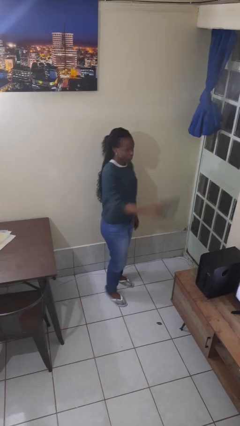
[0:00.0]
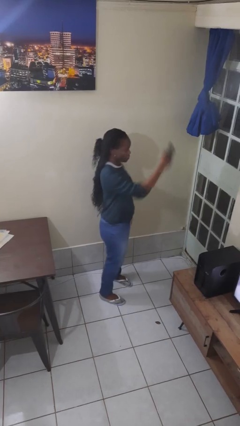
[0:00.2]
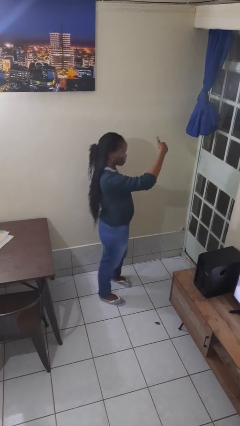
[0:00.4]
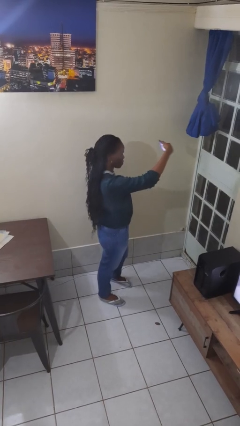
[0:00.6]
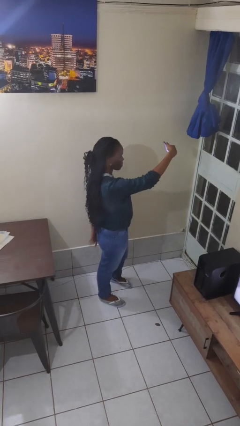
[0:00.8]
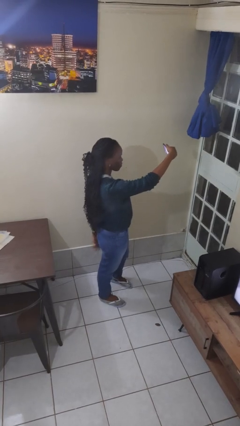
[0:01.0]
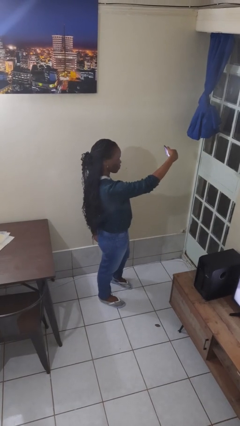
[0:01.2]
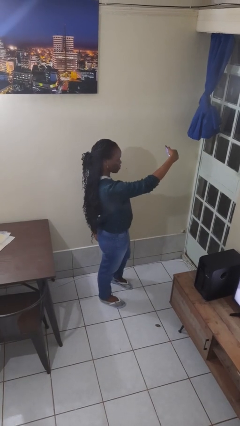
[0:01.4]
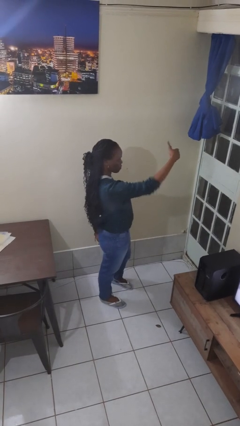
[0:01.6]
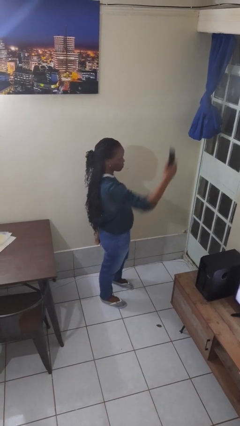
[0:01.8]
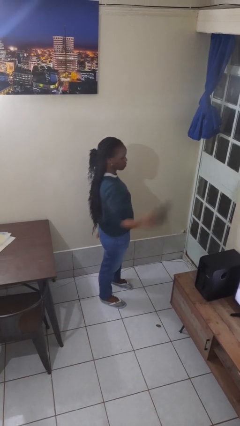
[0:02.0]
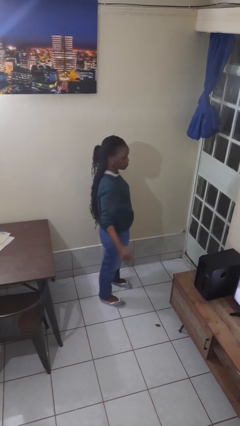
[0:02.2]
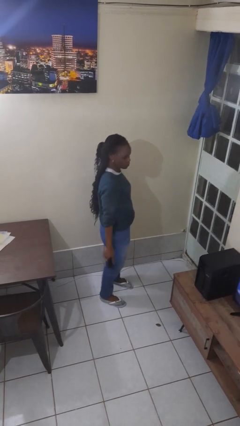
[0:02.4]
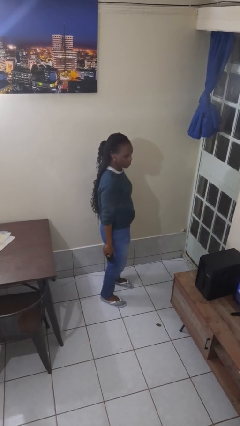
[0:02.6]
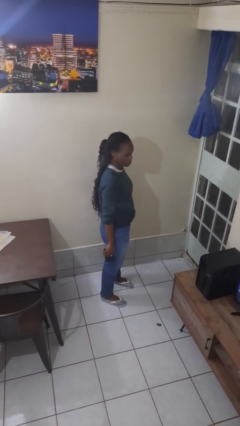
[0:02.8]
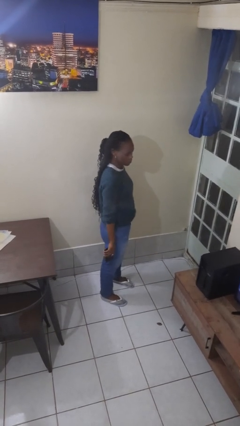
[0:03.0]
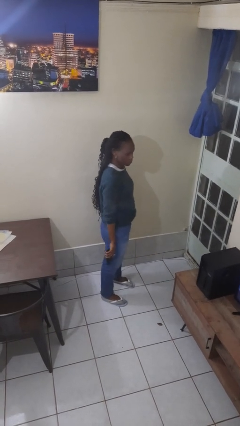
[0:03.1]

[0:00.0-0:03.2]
person takes selfie

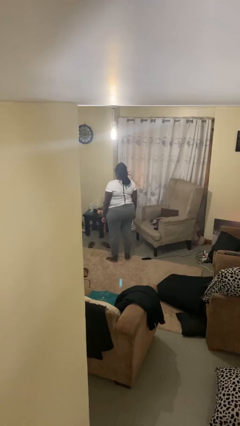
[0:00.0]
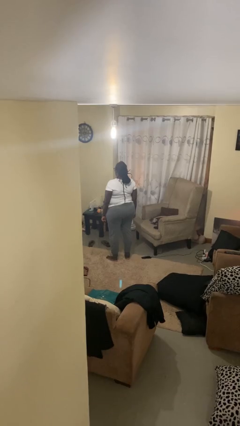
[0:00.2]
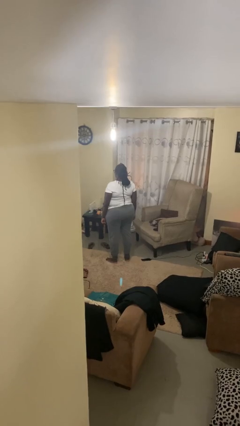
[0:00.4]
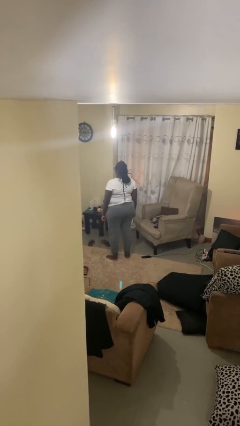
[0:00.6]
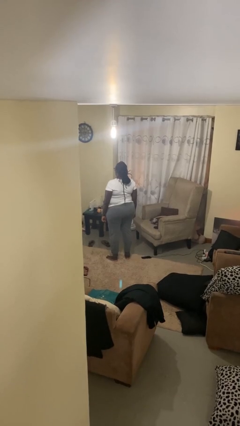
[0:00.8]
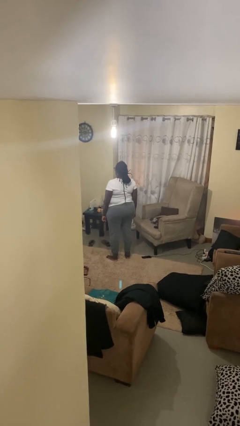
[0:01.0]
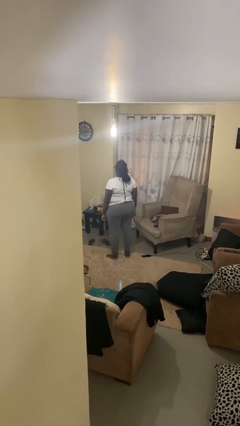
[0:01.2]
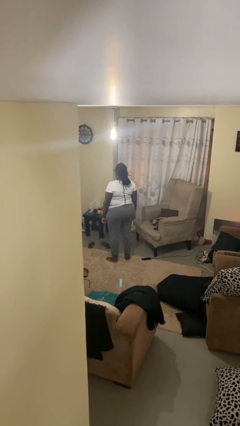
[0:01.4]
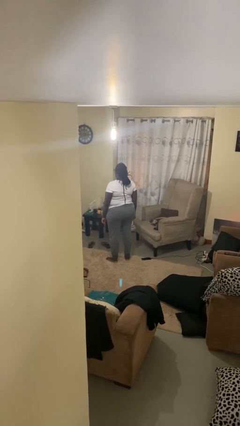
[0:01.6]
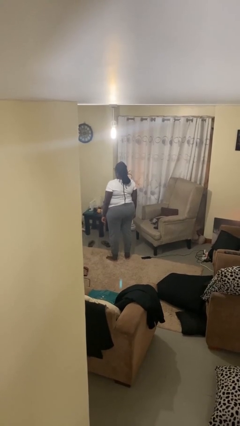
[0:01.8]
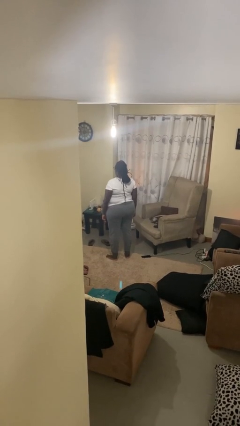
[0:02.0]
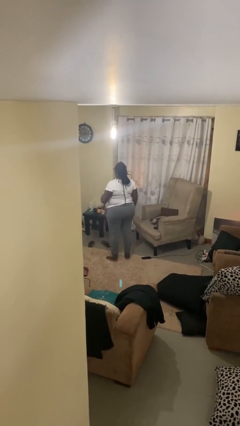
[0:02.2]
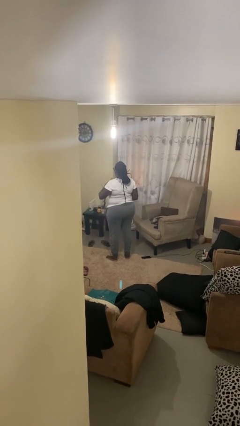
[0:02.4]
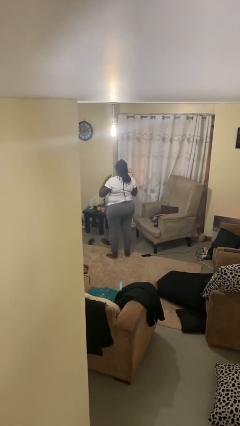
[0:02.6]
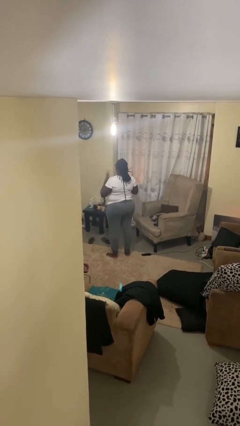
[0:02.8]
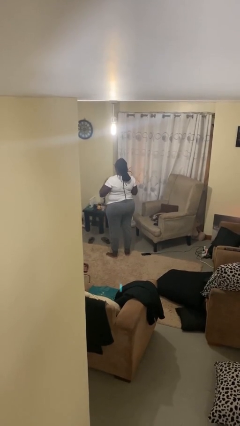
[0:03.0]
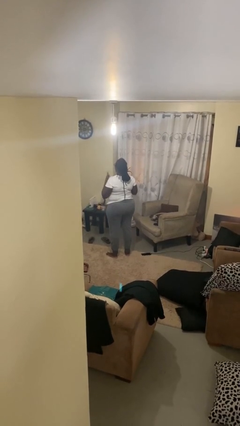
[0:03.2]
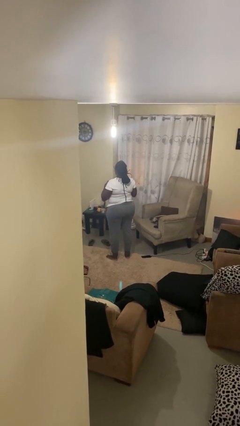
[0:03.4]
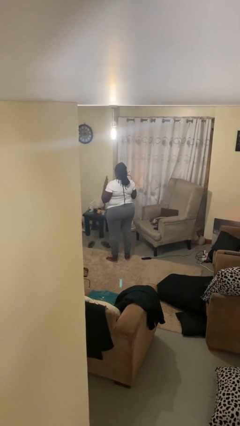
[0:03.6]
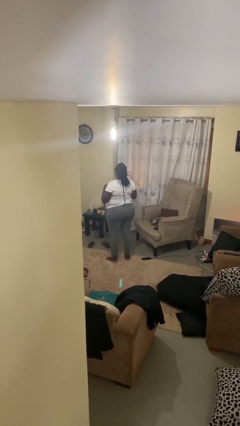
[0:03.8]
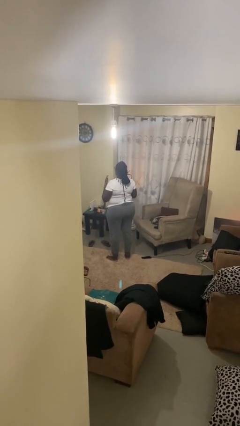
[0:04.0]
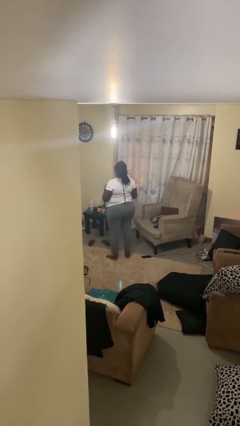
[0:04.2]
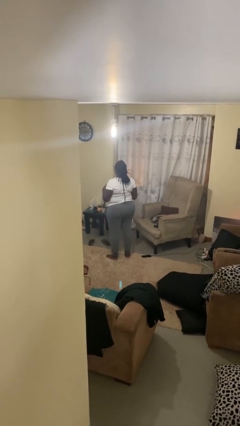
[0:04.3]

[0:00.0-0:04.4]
person drums on chest

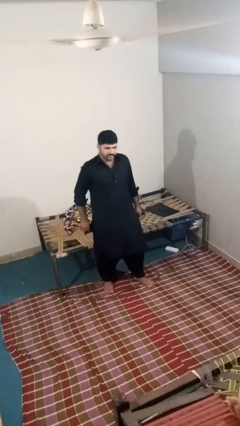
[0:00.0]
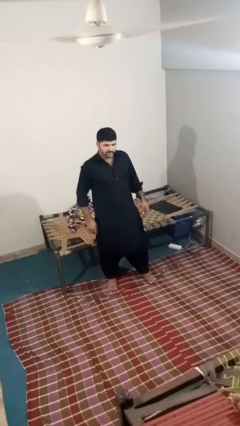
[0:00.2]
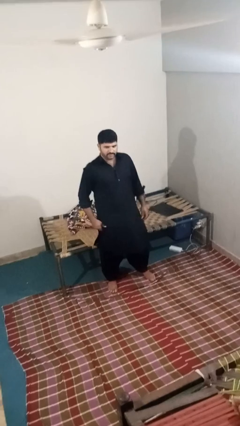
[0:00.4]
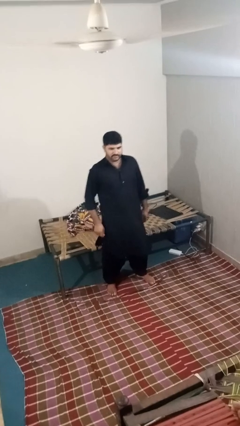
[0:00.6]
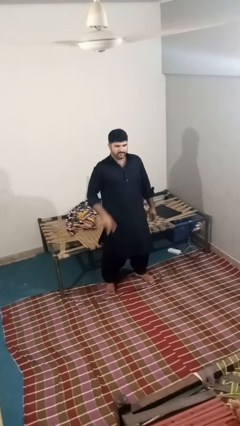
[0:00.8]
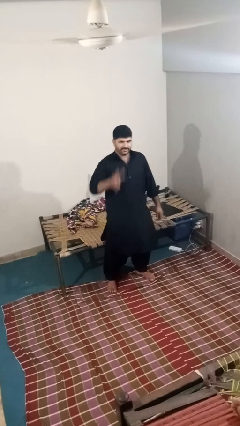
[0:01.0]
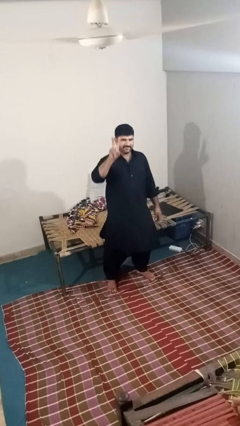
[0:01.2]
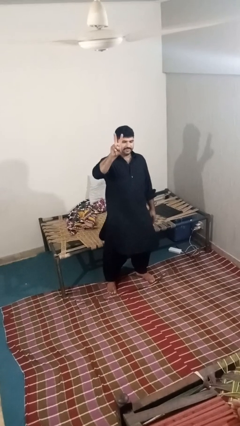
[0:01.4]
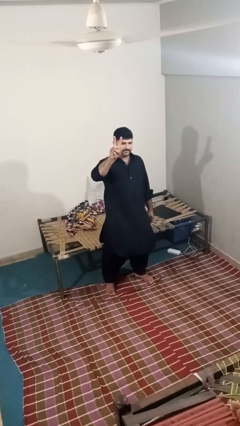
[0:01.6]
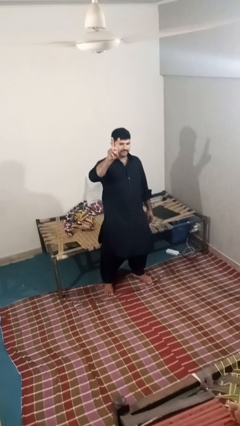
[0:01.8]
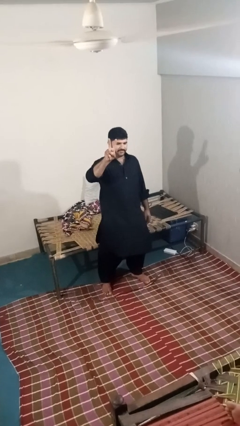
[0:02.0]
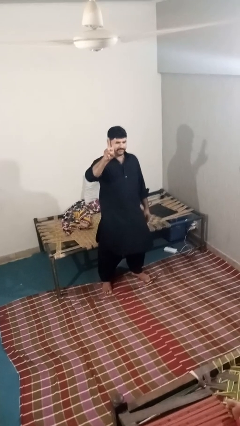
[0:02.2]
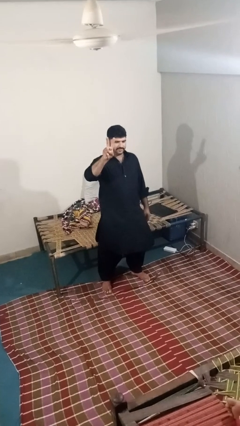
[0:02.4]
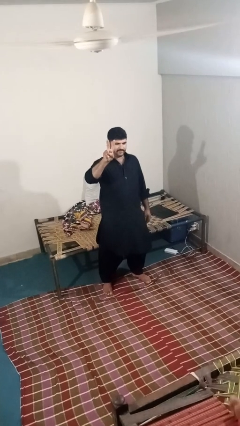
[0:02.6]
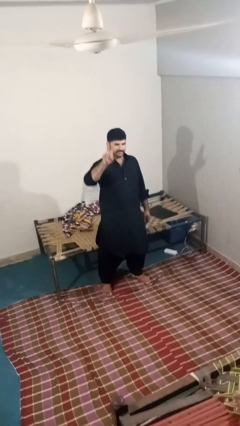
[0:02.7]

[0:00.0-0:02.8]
person gestures peace

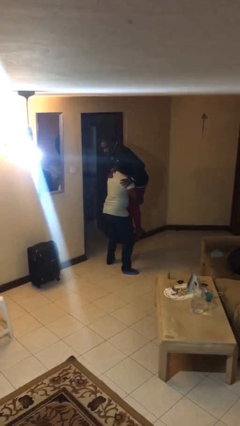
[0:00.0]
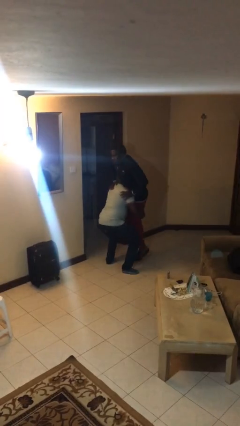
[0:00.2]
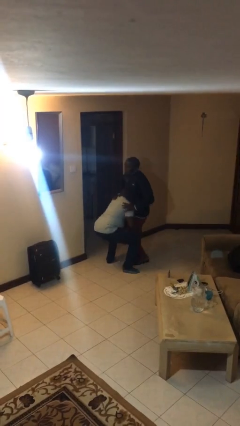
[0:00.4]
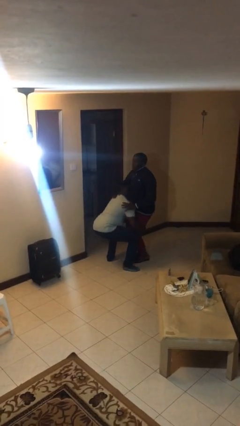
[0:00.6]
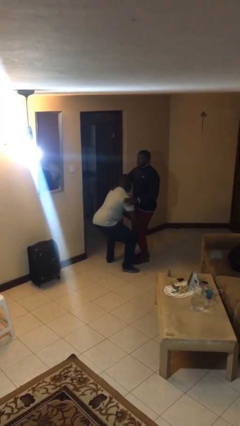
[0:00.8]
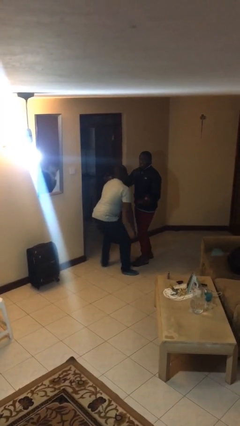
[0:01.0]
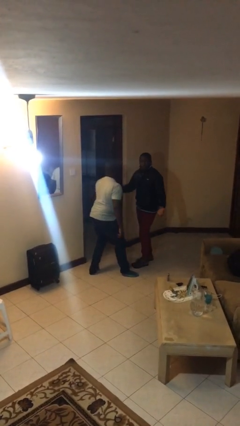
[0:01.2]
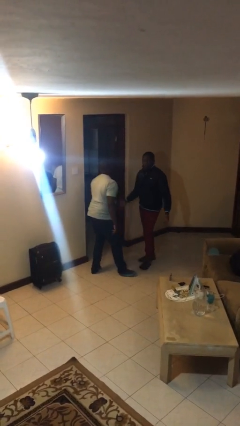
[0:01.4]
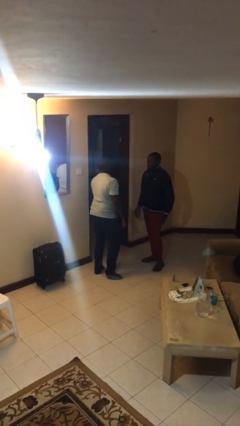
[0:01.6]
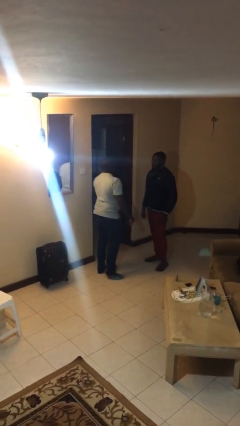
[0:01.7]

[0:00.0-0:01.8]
person puts down person

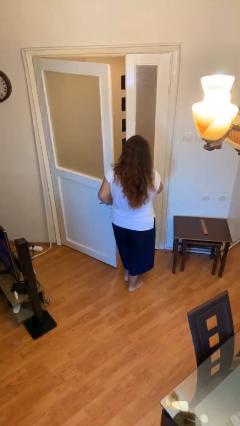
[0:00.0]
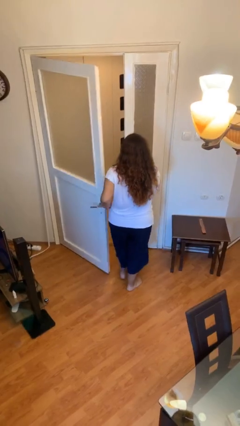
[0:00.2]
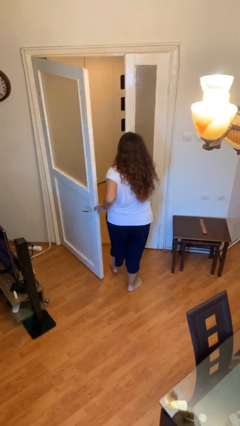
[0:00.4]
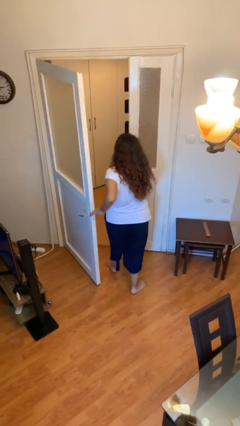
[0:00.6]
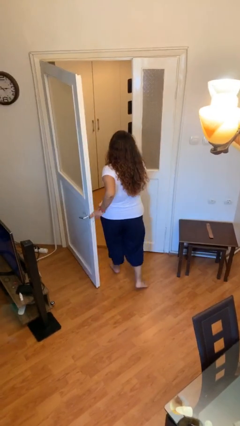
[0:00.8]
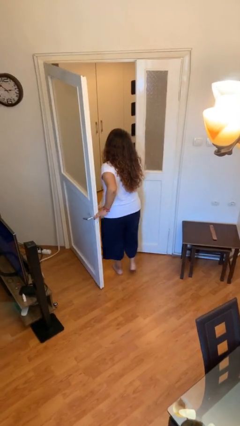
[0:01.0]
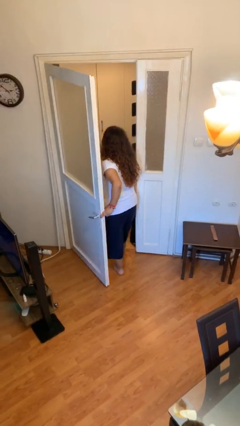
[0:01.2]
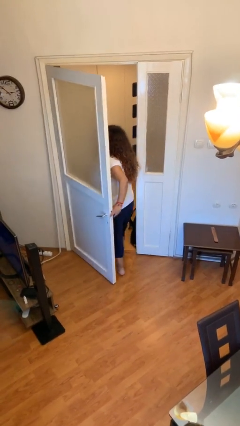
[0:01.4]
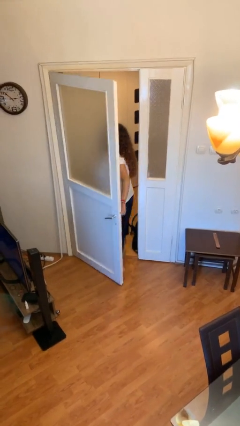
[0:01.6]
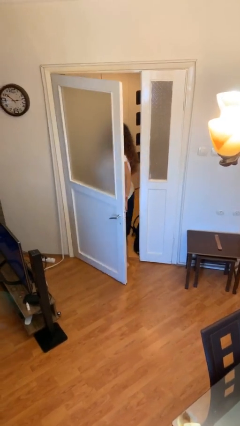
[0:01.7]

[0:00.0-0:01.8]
person exits scene through structure

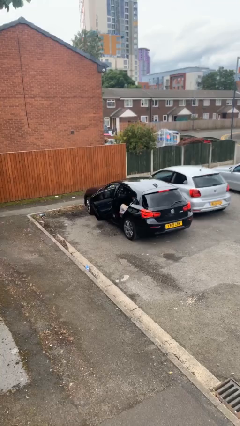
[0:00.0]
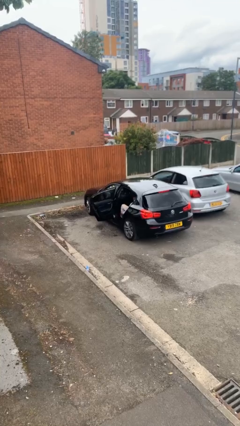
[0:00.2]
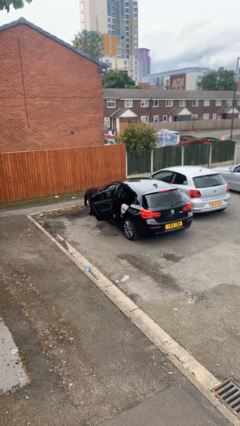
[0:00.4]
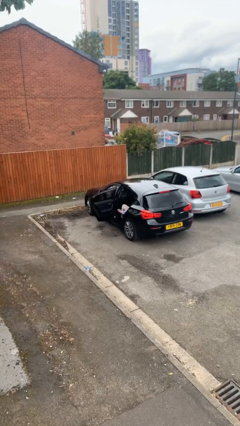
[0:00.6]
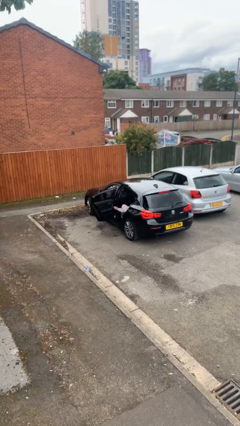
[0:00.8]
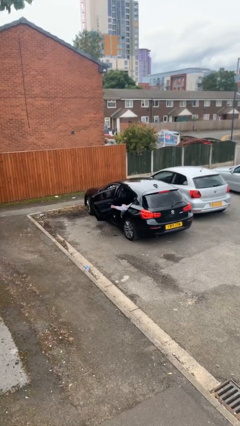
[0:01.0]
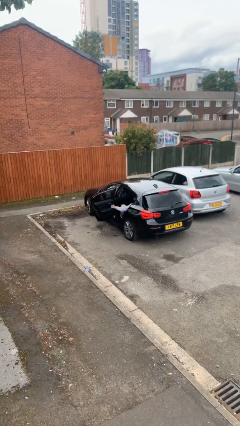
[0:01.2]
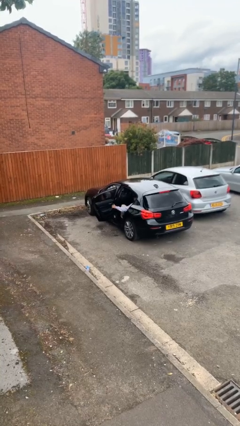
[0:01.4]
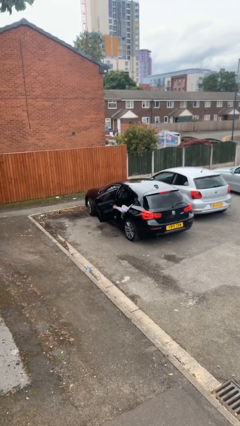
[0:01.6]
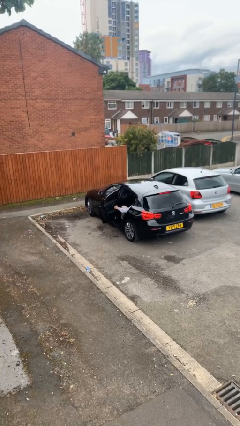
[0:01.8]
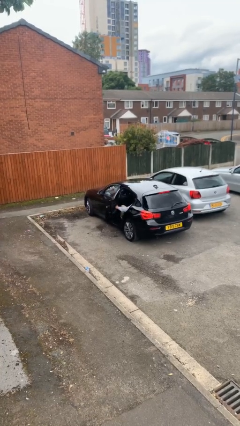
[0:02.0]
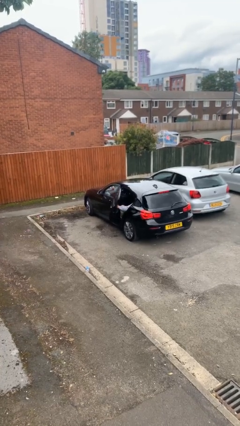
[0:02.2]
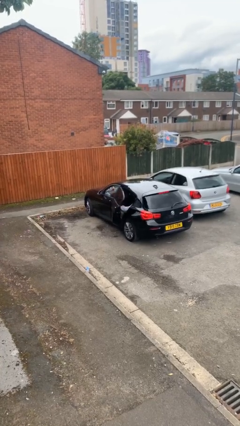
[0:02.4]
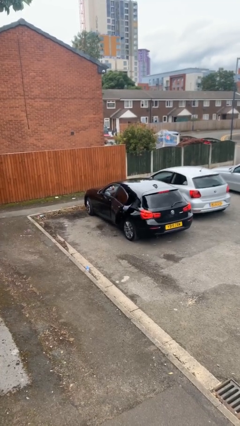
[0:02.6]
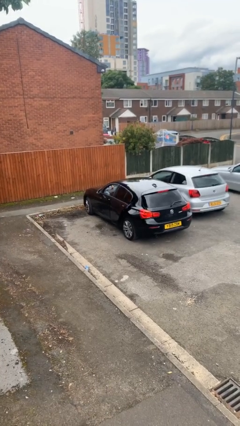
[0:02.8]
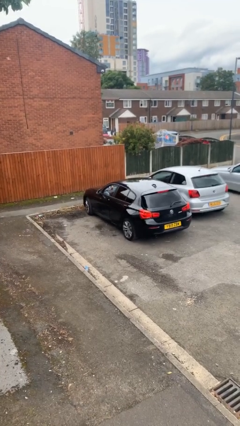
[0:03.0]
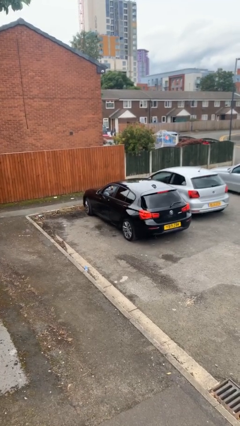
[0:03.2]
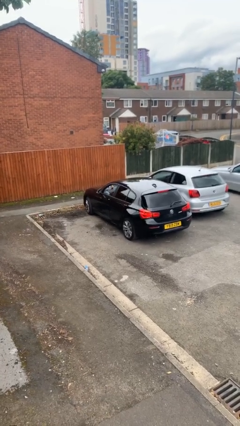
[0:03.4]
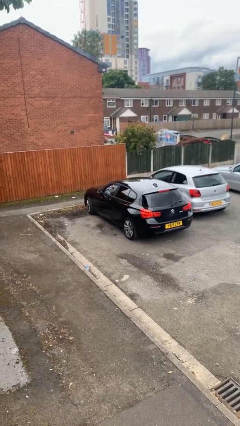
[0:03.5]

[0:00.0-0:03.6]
person closes car door
